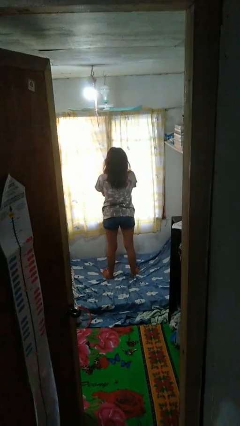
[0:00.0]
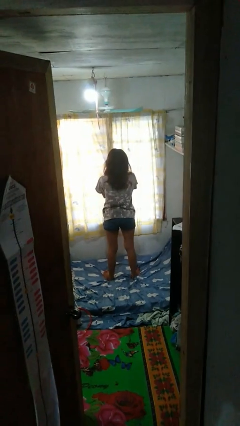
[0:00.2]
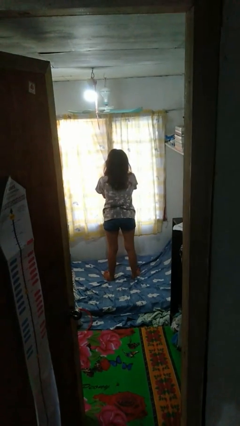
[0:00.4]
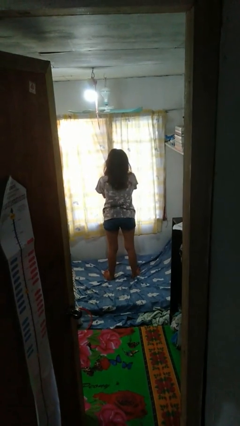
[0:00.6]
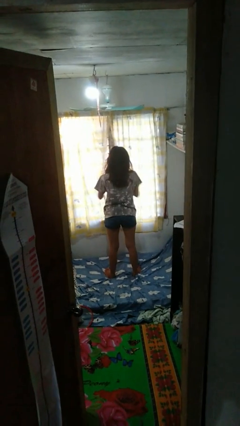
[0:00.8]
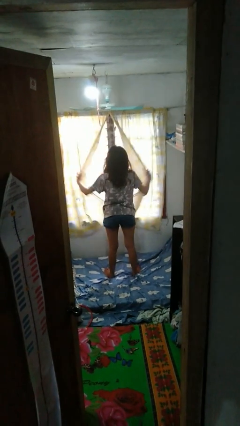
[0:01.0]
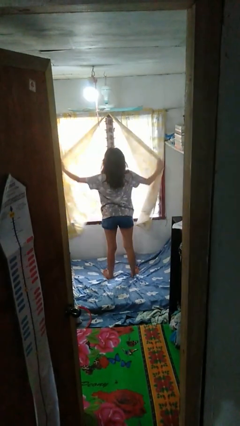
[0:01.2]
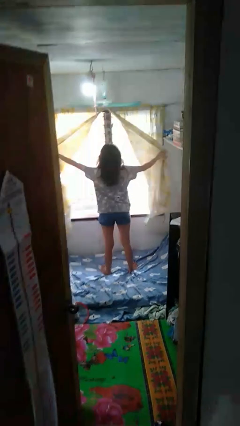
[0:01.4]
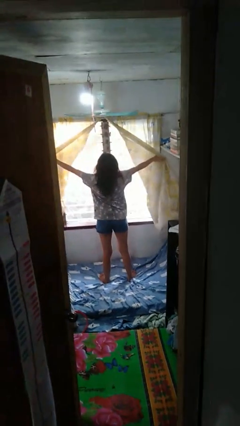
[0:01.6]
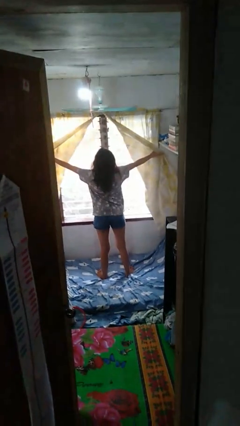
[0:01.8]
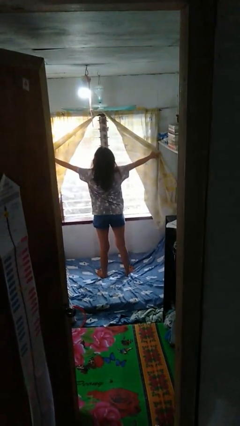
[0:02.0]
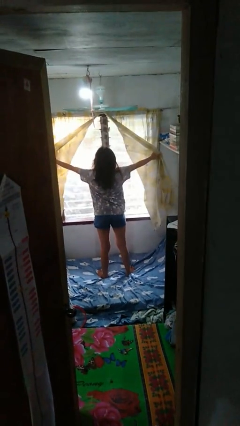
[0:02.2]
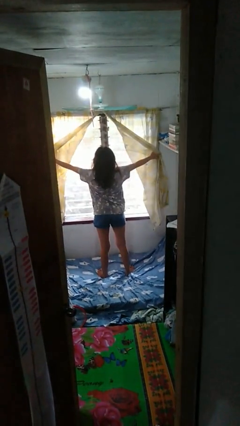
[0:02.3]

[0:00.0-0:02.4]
person opens curtains

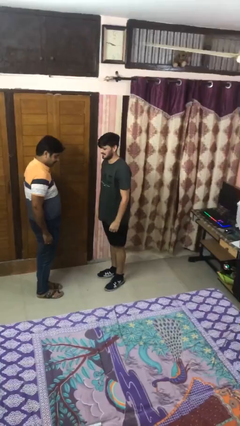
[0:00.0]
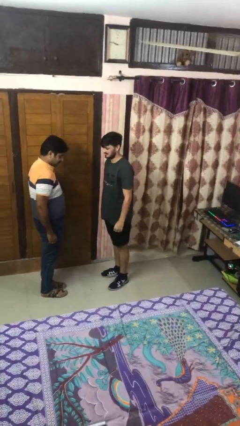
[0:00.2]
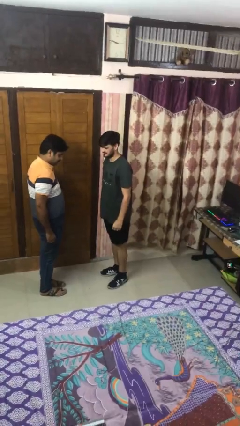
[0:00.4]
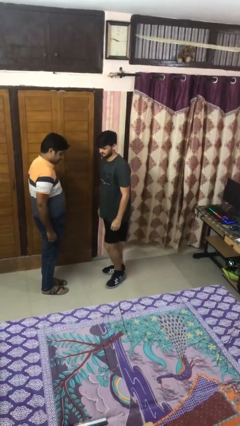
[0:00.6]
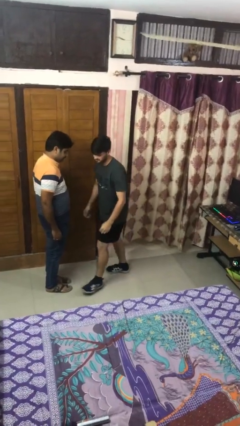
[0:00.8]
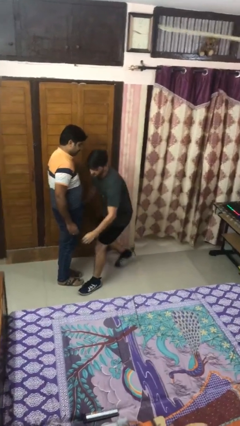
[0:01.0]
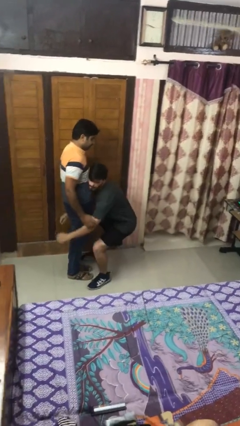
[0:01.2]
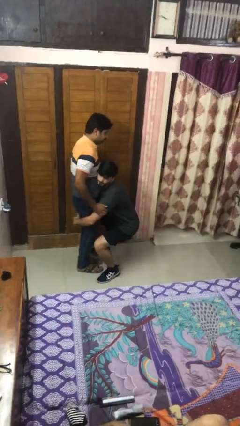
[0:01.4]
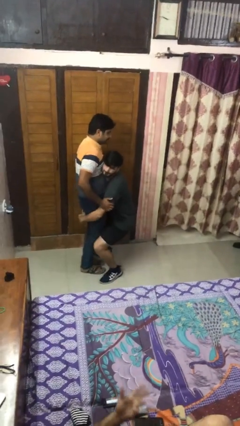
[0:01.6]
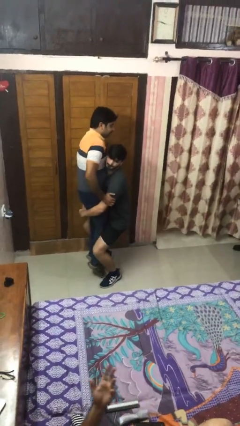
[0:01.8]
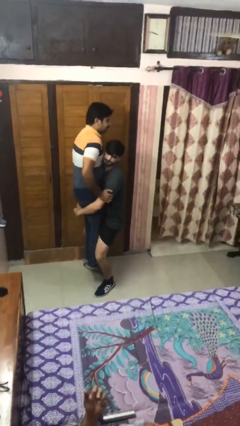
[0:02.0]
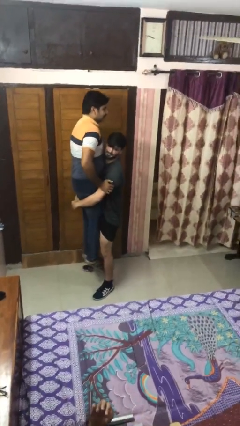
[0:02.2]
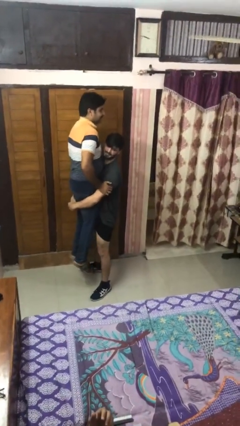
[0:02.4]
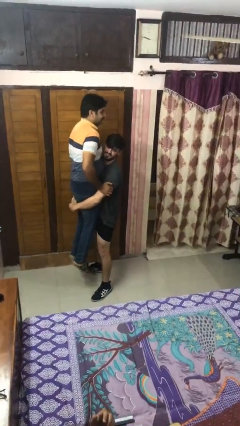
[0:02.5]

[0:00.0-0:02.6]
person picks up person

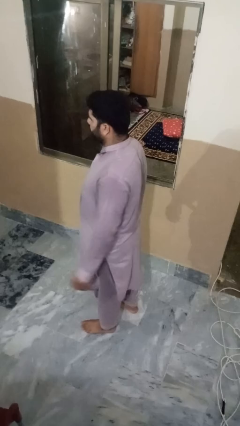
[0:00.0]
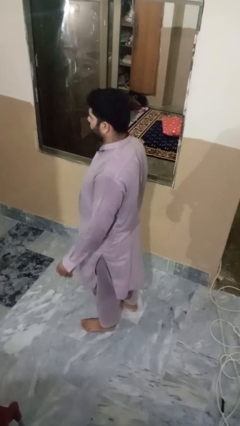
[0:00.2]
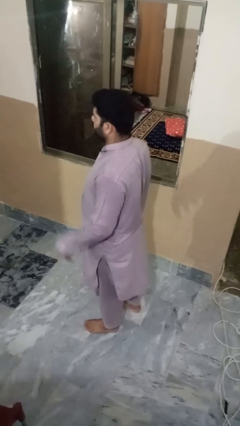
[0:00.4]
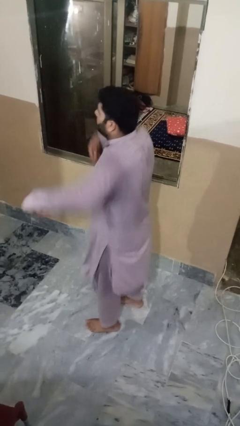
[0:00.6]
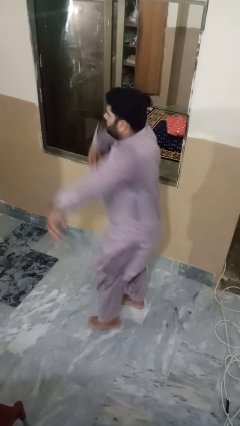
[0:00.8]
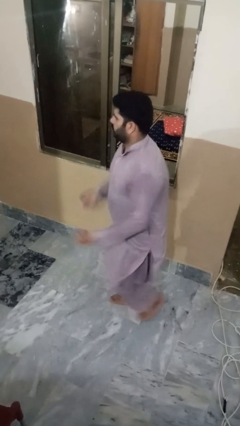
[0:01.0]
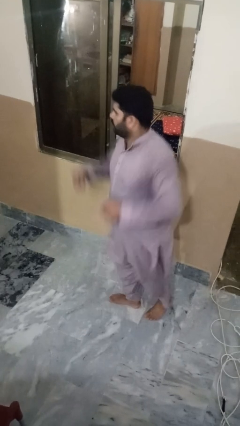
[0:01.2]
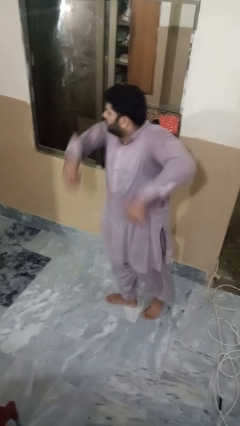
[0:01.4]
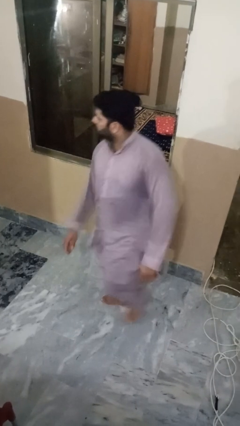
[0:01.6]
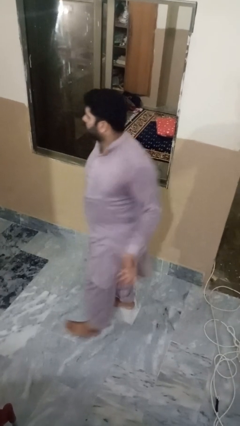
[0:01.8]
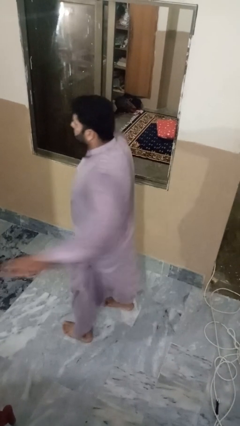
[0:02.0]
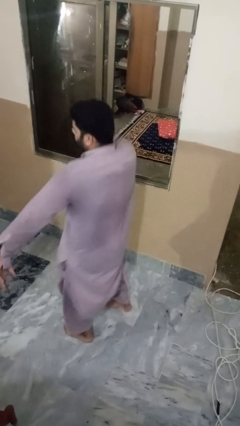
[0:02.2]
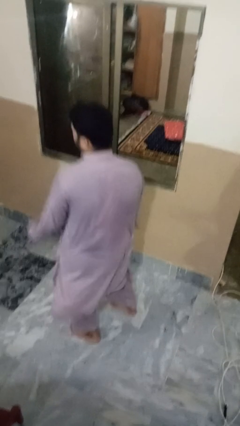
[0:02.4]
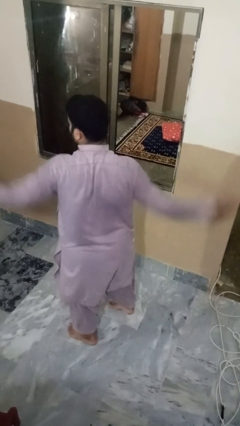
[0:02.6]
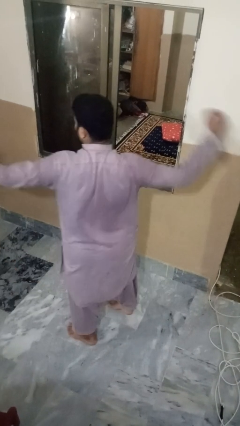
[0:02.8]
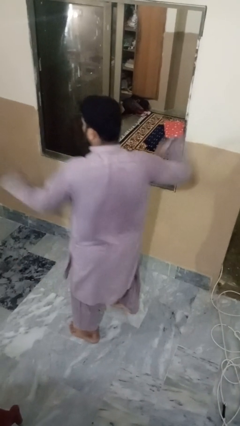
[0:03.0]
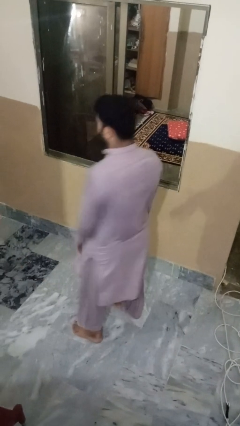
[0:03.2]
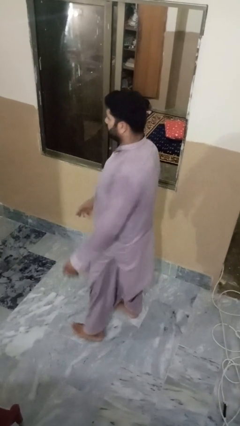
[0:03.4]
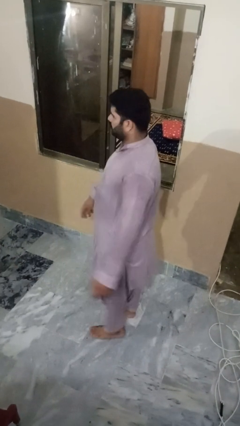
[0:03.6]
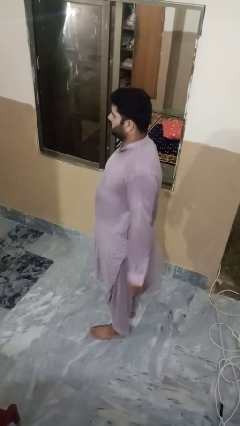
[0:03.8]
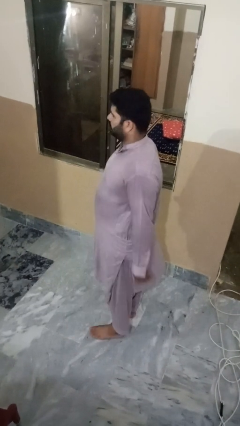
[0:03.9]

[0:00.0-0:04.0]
person dances in place

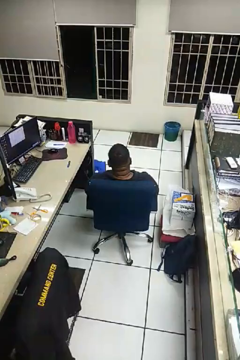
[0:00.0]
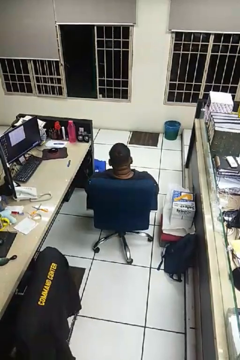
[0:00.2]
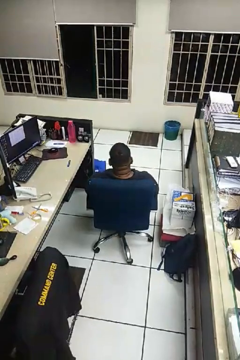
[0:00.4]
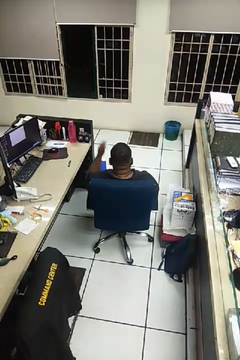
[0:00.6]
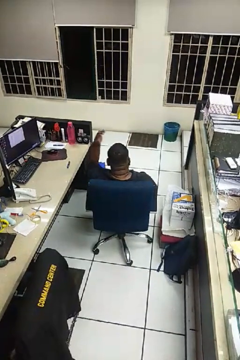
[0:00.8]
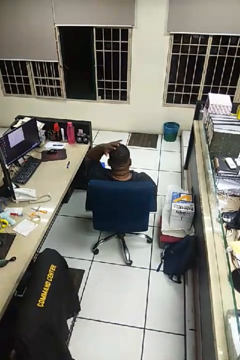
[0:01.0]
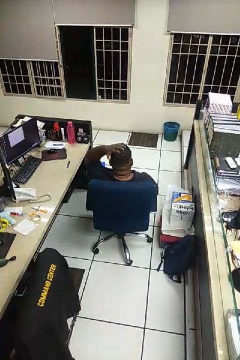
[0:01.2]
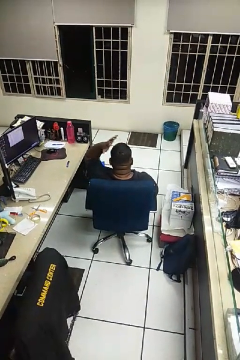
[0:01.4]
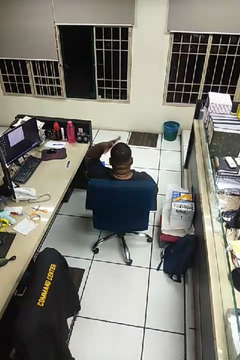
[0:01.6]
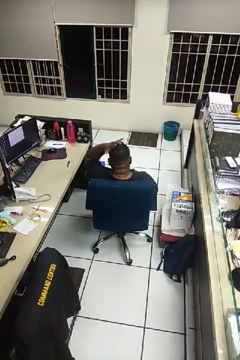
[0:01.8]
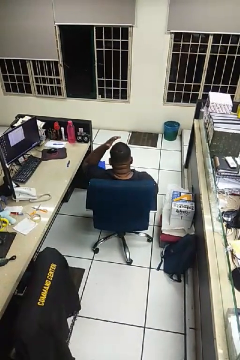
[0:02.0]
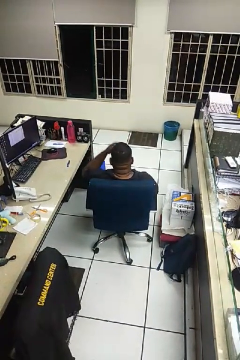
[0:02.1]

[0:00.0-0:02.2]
person pats head

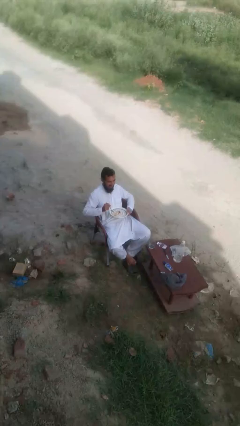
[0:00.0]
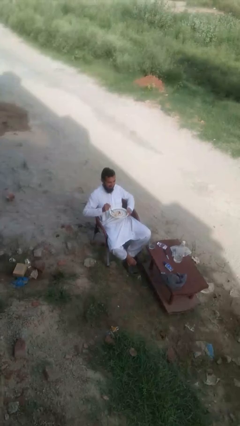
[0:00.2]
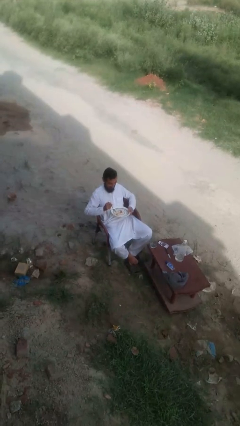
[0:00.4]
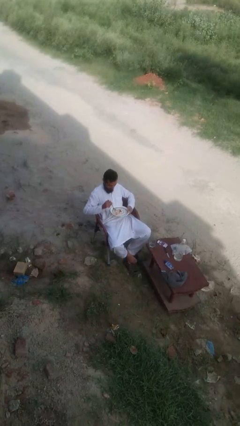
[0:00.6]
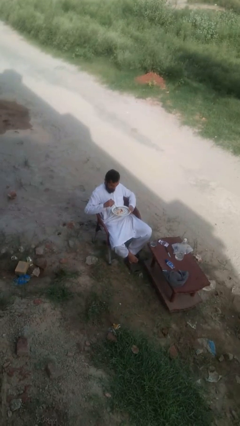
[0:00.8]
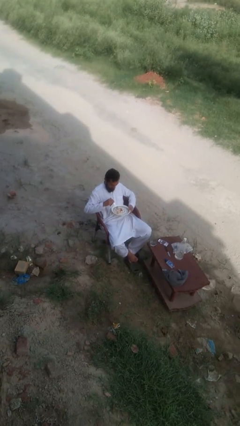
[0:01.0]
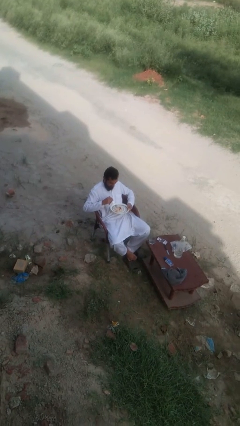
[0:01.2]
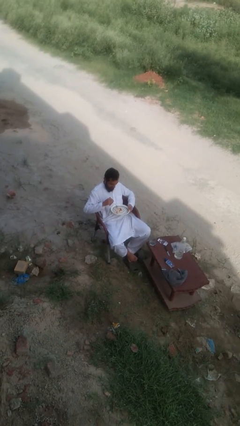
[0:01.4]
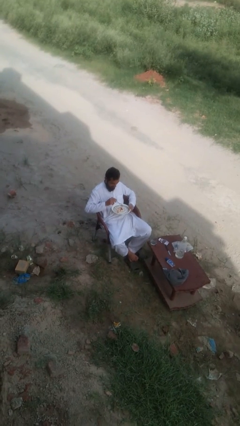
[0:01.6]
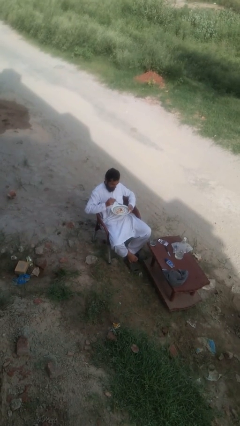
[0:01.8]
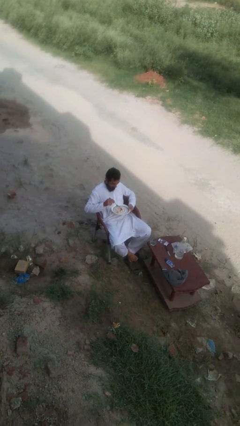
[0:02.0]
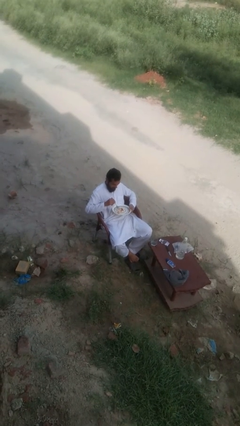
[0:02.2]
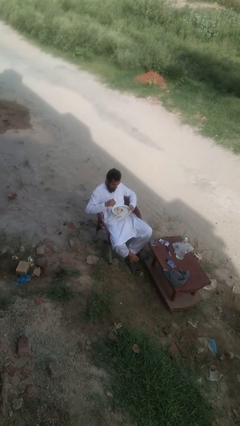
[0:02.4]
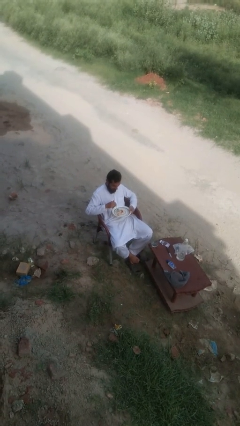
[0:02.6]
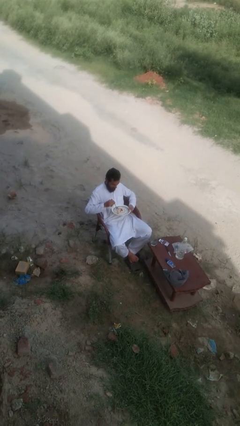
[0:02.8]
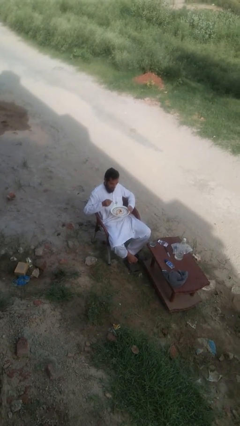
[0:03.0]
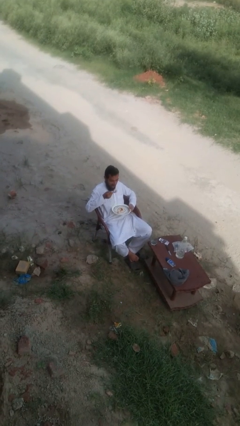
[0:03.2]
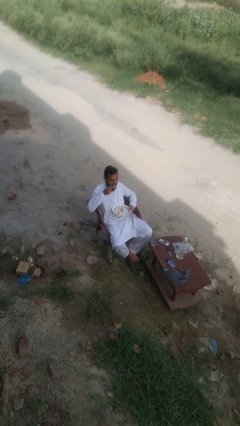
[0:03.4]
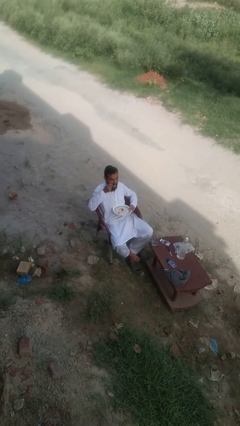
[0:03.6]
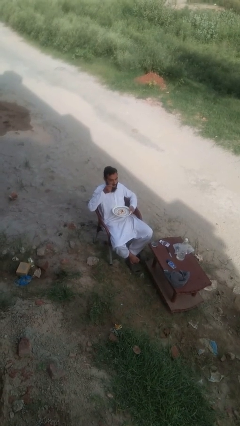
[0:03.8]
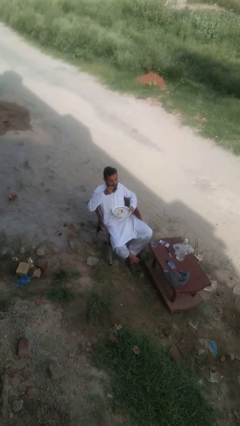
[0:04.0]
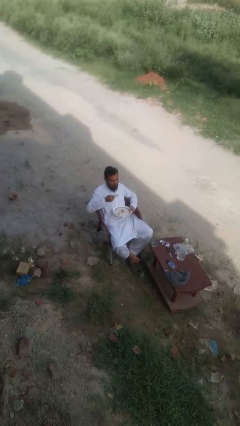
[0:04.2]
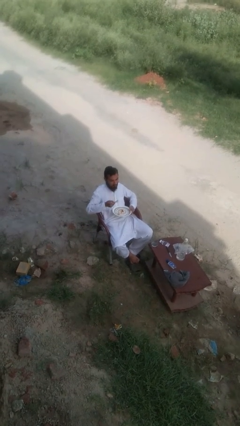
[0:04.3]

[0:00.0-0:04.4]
person eats with utensil

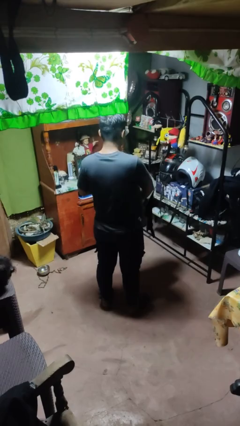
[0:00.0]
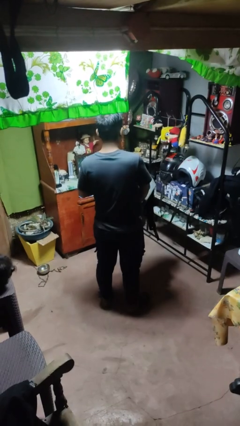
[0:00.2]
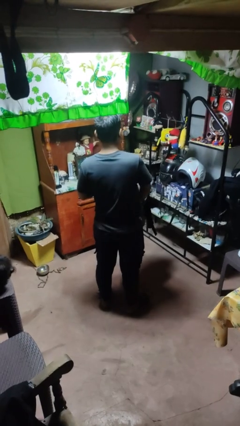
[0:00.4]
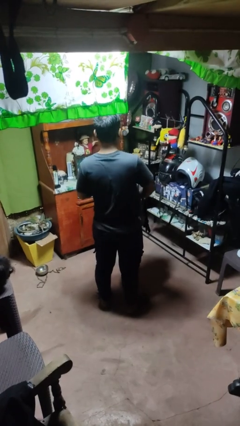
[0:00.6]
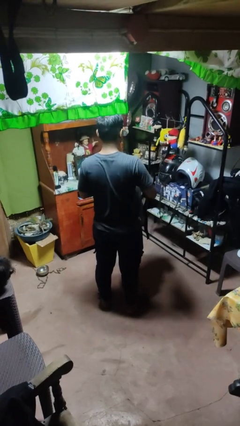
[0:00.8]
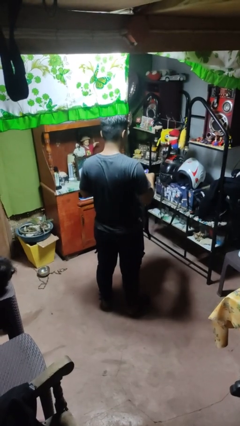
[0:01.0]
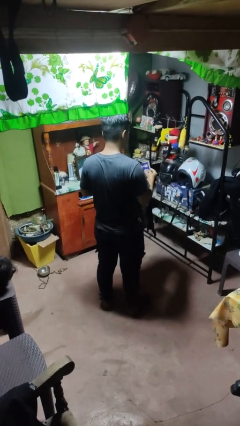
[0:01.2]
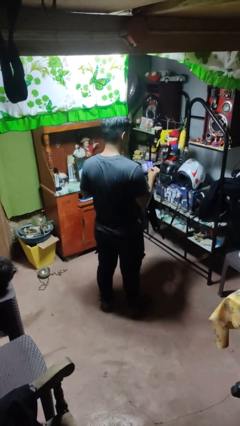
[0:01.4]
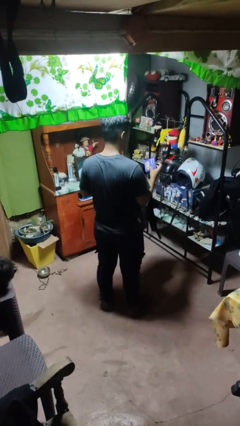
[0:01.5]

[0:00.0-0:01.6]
person takes object from bag

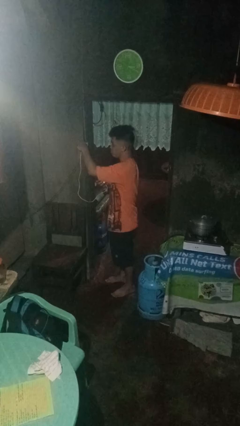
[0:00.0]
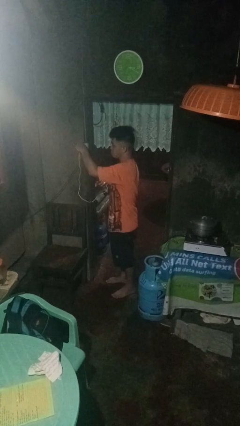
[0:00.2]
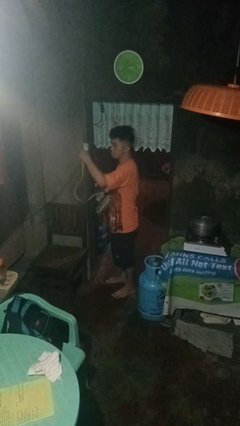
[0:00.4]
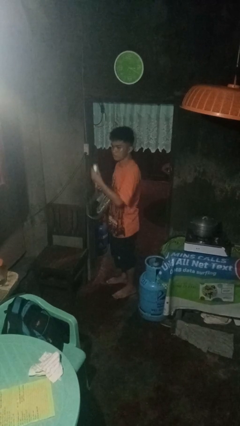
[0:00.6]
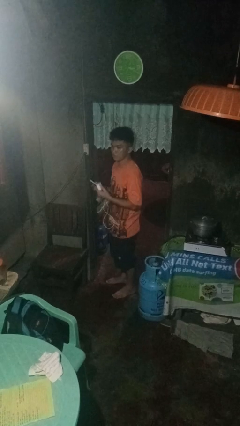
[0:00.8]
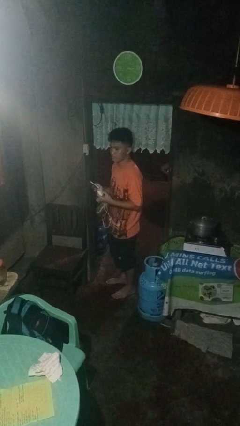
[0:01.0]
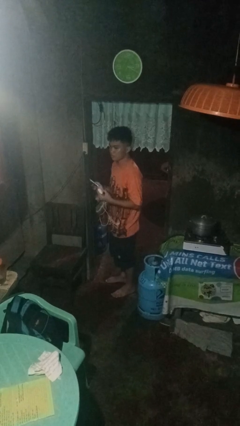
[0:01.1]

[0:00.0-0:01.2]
person unplugs from electrical socket
